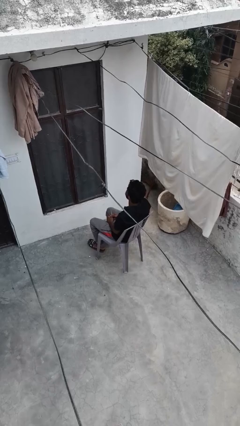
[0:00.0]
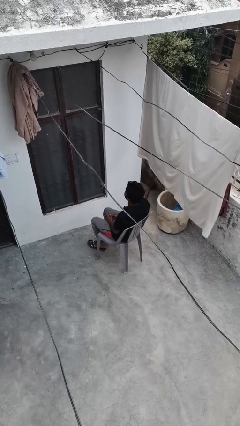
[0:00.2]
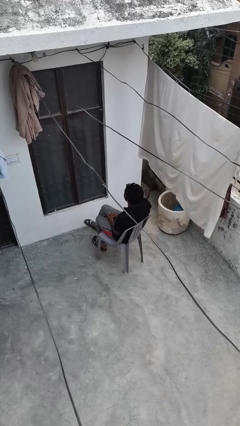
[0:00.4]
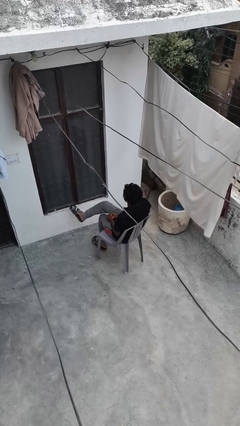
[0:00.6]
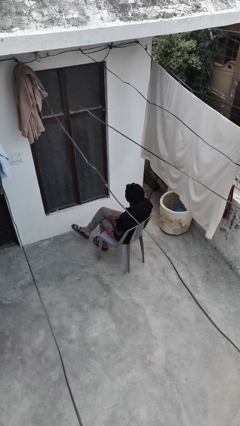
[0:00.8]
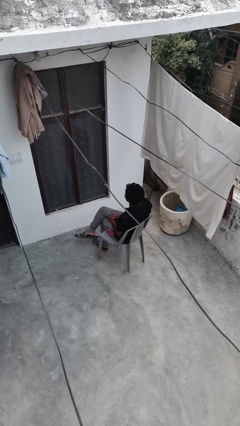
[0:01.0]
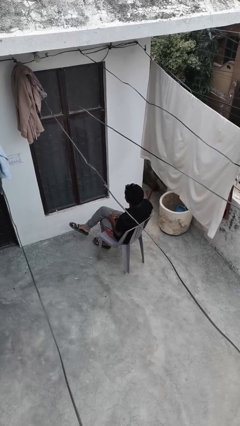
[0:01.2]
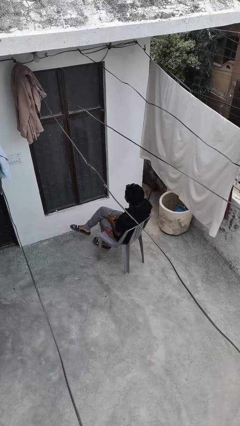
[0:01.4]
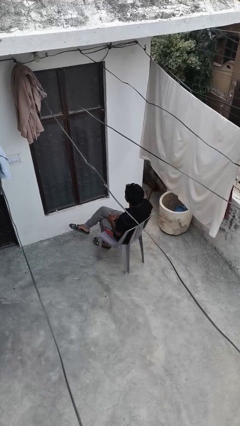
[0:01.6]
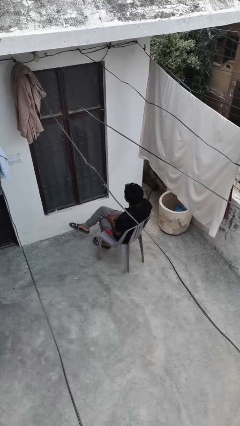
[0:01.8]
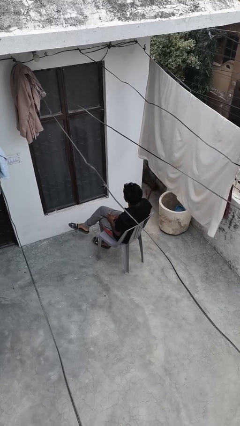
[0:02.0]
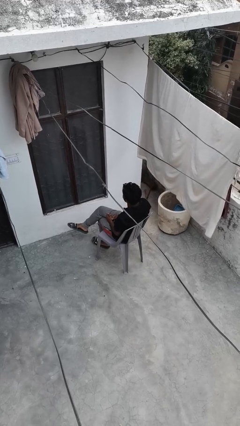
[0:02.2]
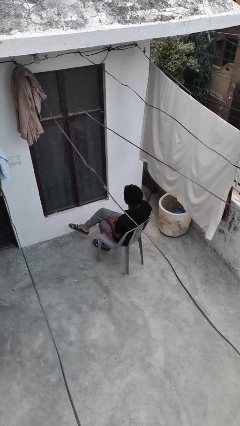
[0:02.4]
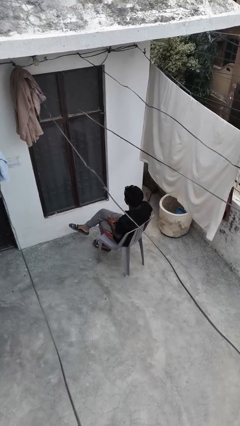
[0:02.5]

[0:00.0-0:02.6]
person crosses legs

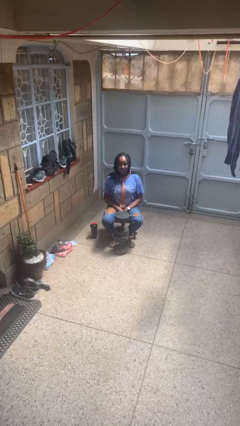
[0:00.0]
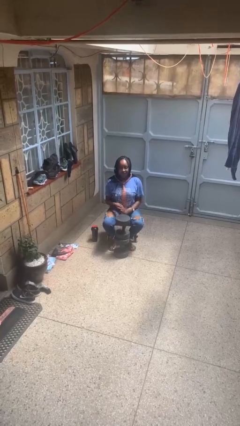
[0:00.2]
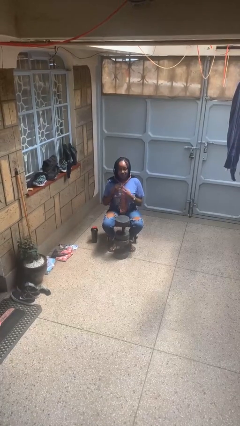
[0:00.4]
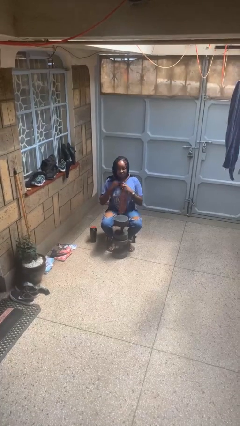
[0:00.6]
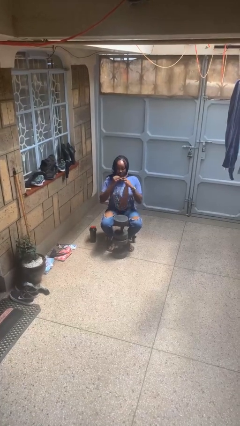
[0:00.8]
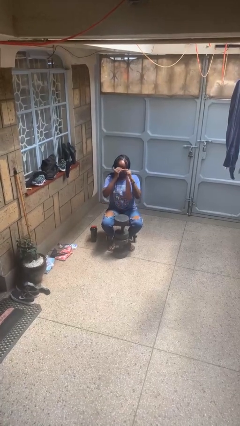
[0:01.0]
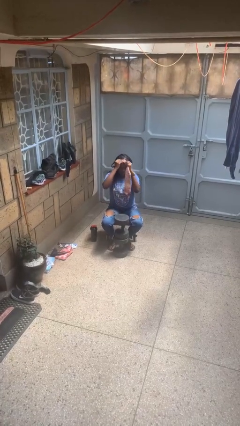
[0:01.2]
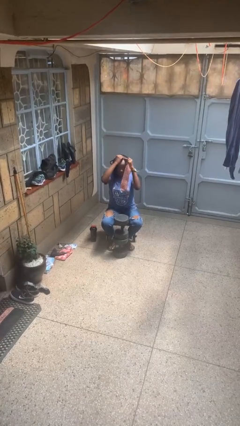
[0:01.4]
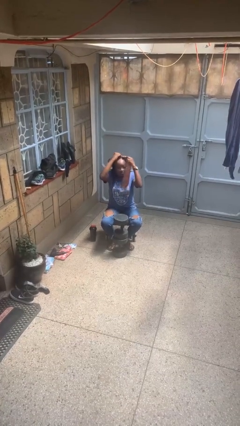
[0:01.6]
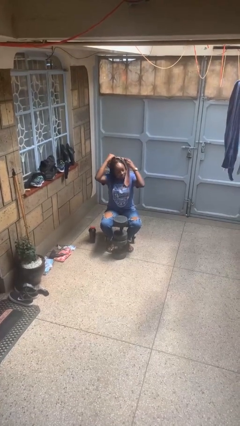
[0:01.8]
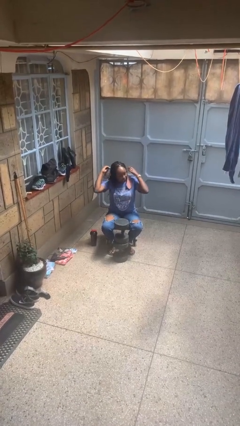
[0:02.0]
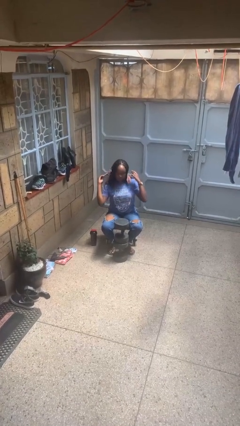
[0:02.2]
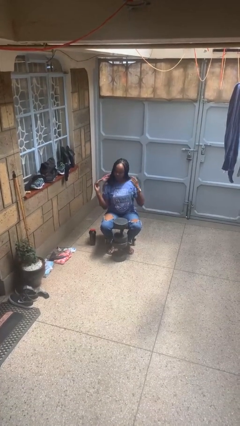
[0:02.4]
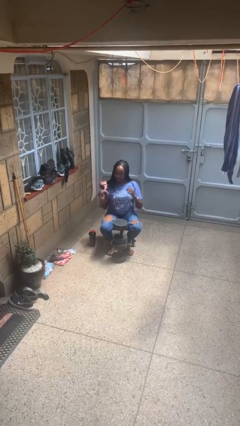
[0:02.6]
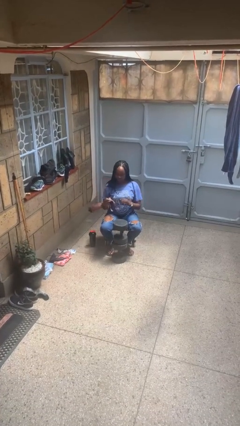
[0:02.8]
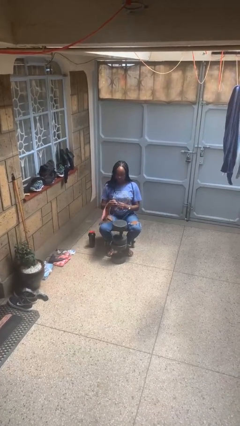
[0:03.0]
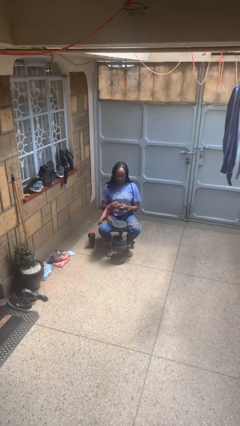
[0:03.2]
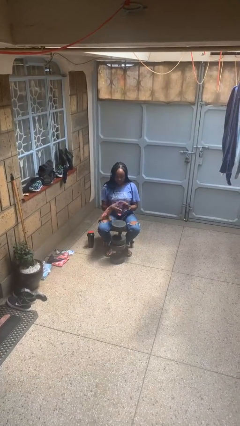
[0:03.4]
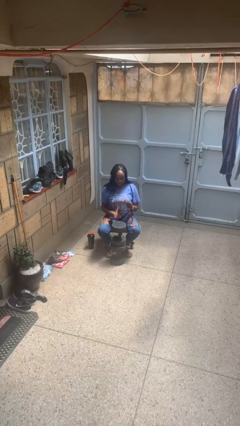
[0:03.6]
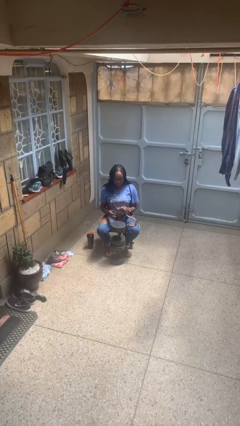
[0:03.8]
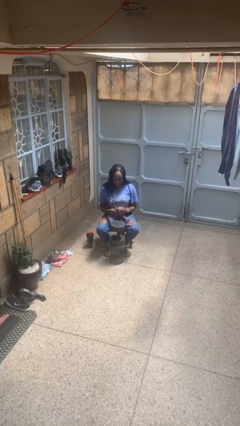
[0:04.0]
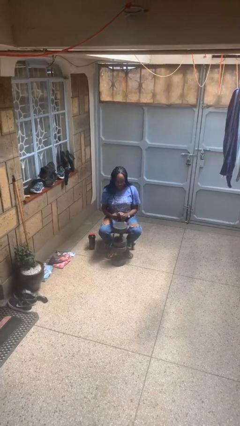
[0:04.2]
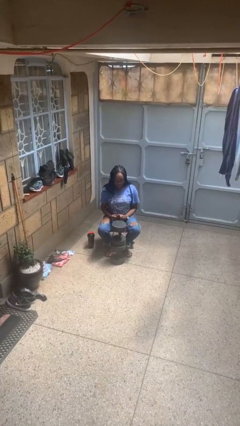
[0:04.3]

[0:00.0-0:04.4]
person takes off necktie

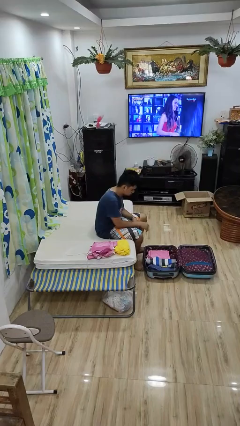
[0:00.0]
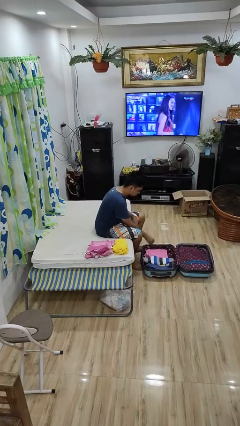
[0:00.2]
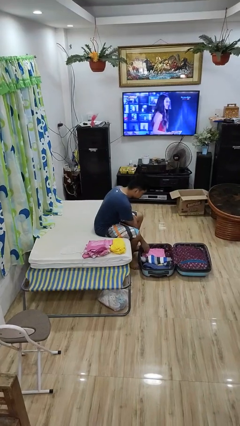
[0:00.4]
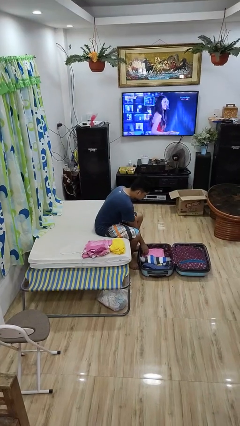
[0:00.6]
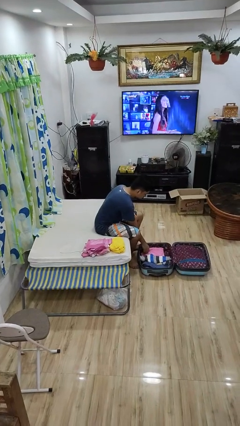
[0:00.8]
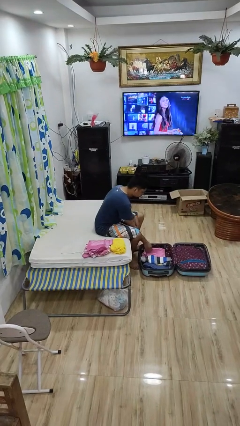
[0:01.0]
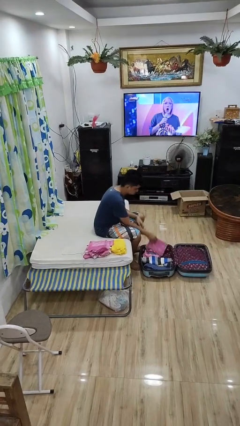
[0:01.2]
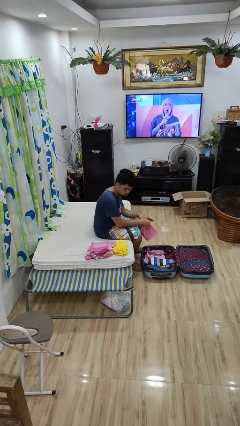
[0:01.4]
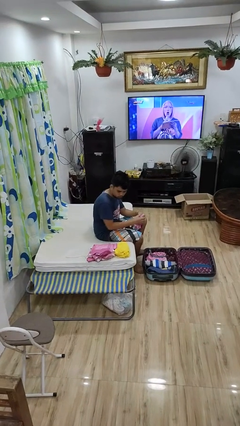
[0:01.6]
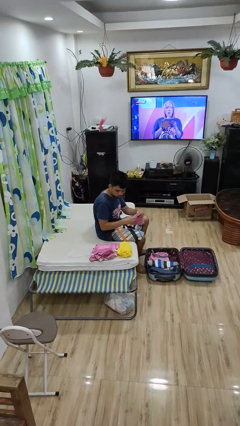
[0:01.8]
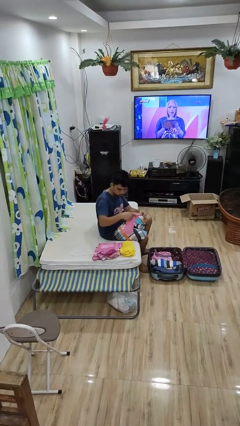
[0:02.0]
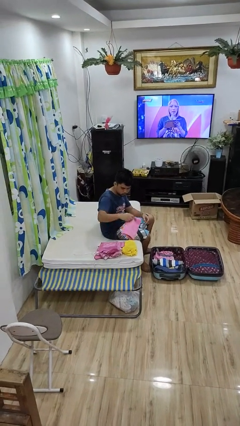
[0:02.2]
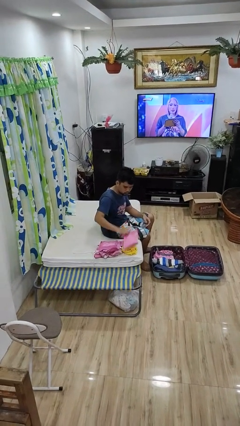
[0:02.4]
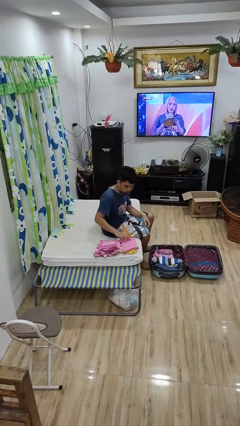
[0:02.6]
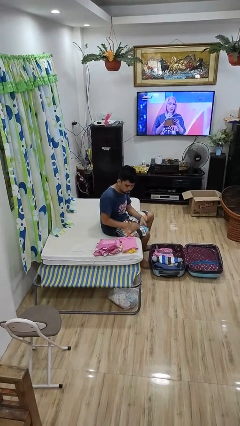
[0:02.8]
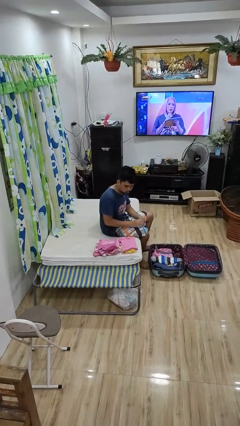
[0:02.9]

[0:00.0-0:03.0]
person unloads clothes from suitcase

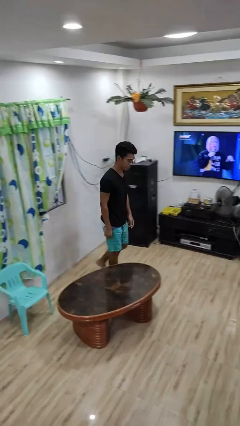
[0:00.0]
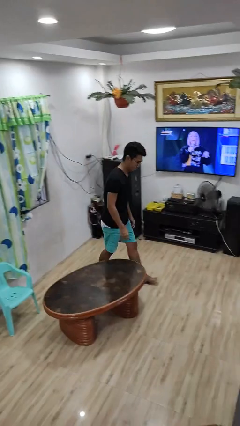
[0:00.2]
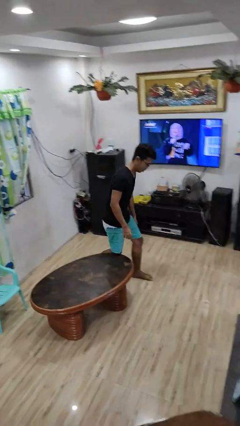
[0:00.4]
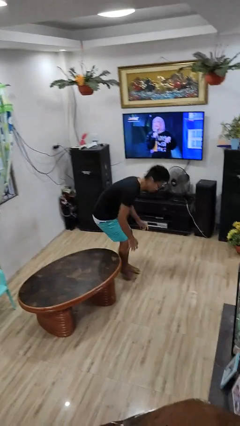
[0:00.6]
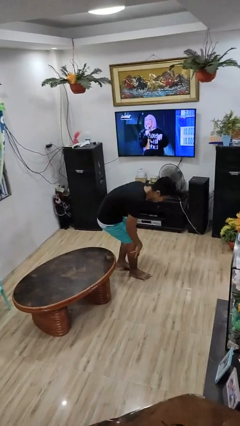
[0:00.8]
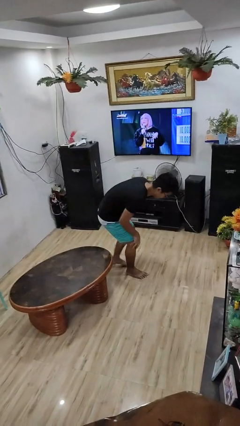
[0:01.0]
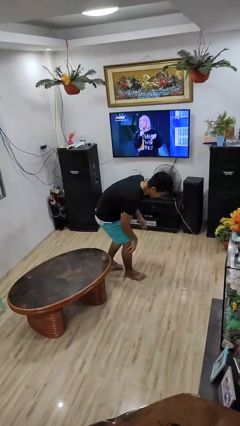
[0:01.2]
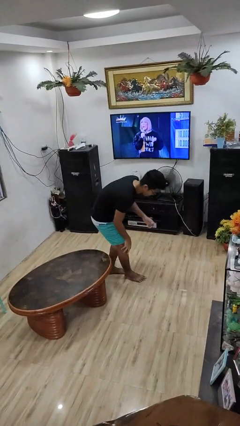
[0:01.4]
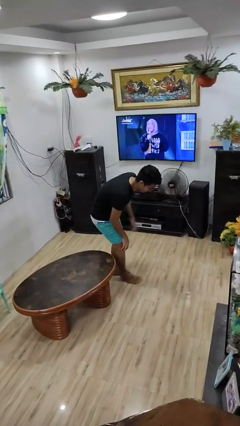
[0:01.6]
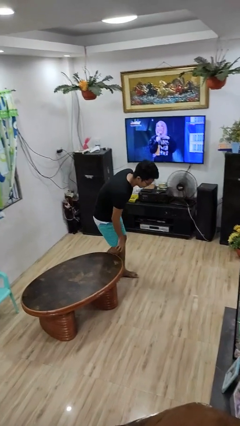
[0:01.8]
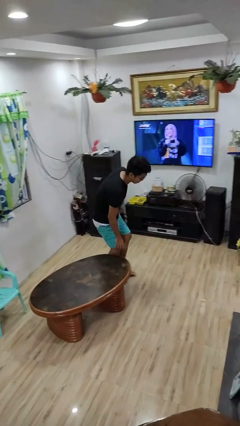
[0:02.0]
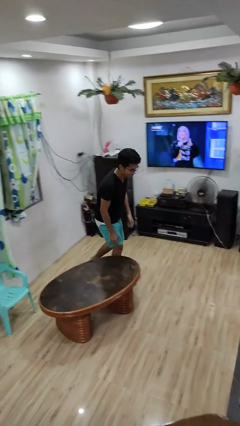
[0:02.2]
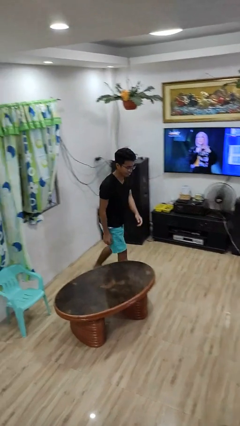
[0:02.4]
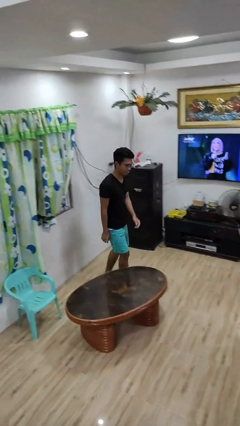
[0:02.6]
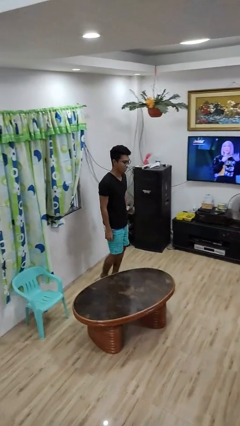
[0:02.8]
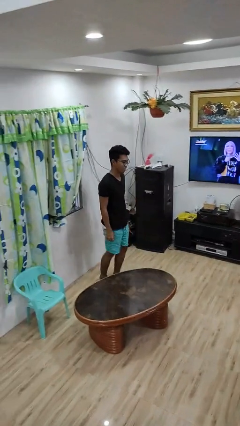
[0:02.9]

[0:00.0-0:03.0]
person bumps into table

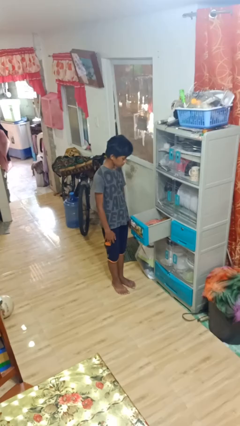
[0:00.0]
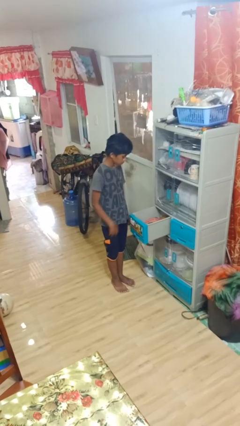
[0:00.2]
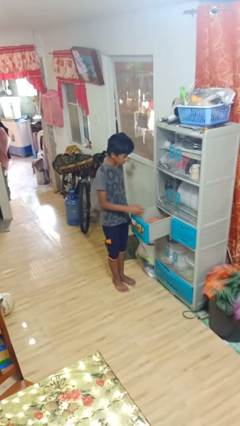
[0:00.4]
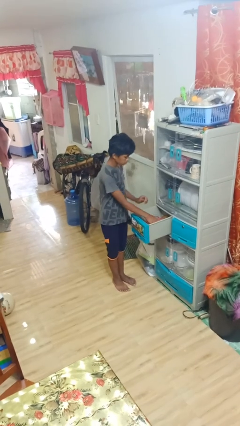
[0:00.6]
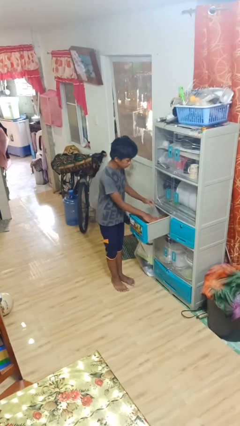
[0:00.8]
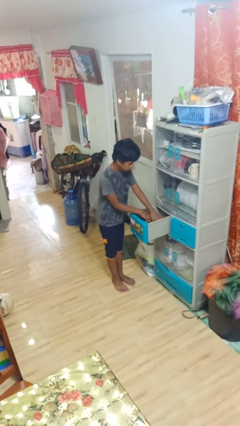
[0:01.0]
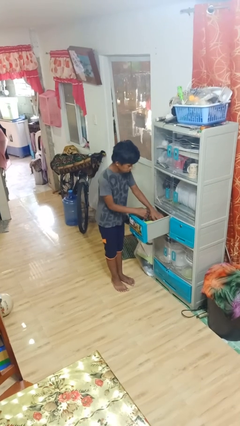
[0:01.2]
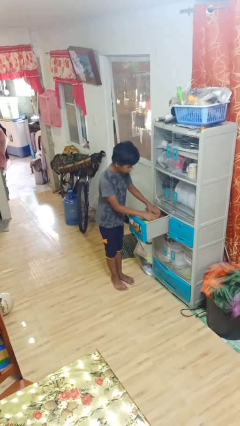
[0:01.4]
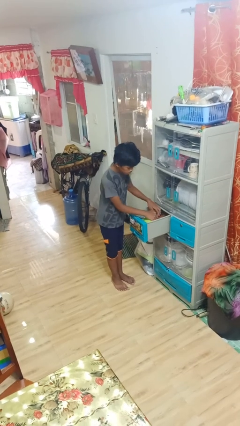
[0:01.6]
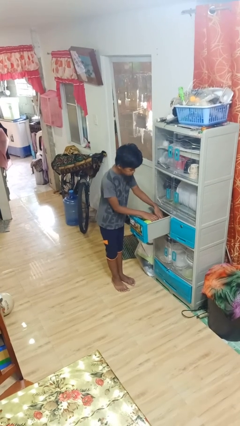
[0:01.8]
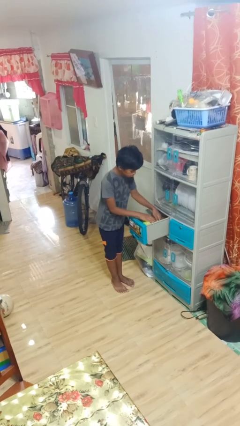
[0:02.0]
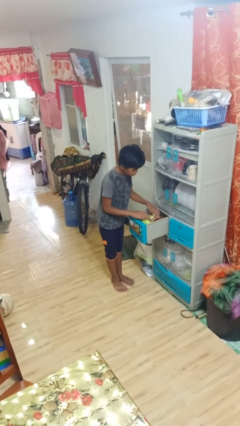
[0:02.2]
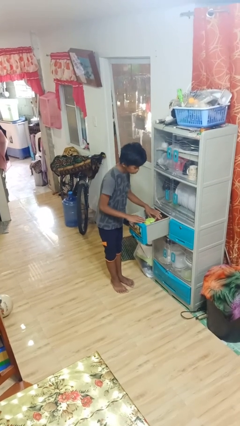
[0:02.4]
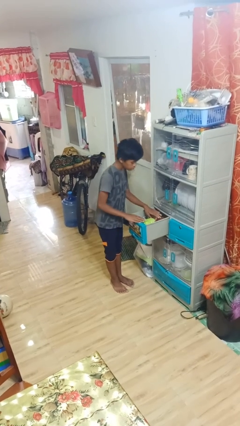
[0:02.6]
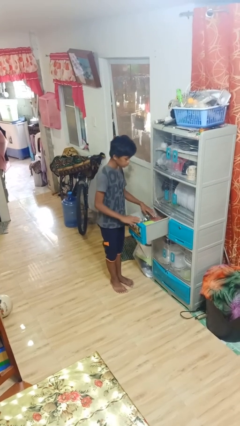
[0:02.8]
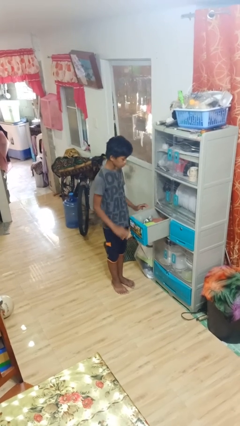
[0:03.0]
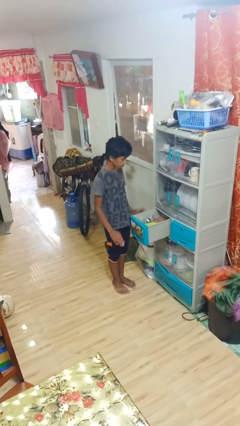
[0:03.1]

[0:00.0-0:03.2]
person searches in kitchen drawer

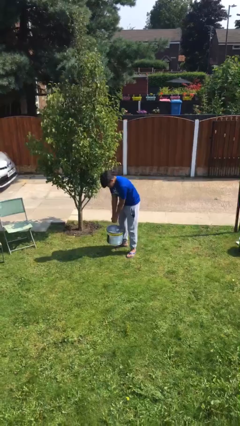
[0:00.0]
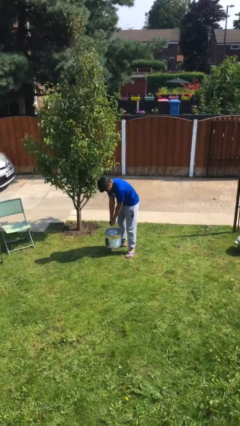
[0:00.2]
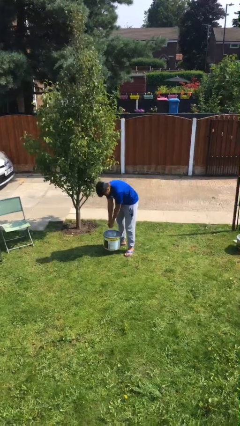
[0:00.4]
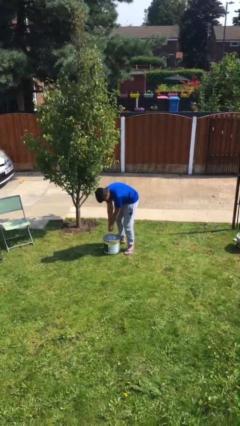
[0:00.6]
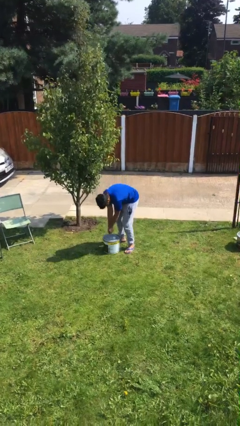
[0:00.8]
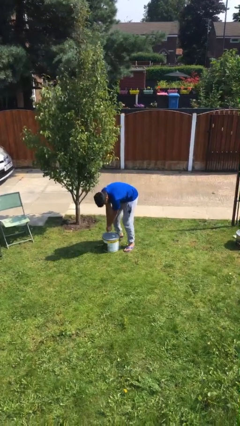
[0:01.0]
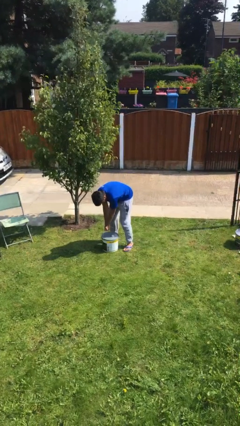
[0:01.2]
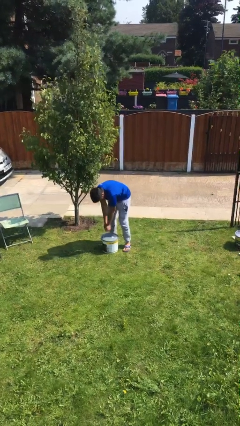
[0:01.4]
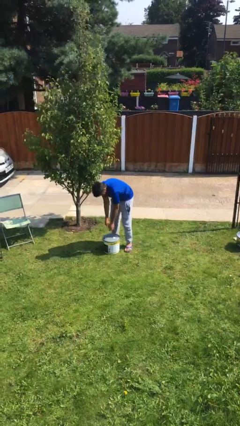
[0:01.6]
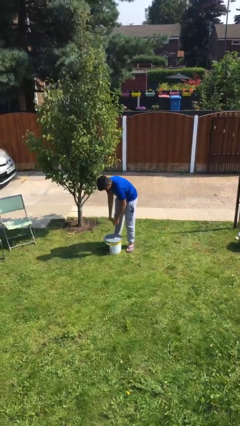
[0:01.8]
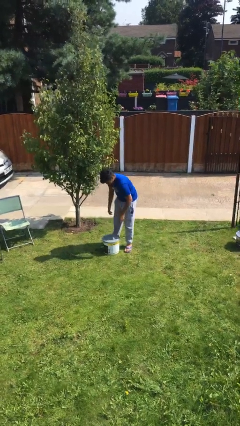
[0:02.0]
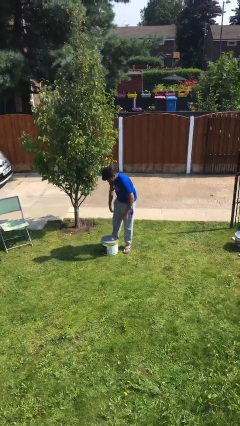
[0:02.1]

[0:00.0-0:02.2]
person puts down object on floor
